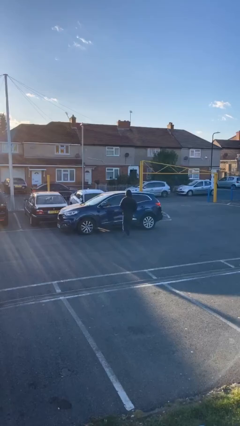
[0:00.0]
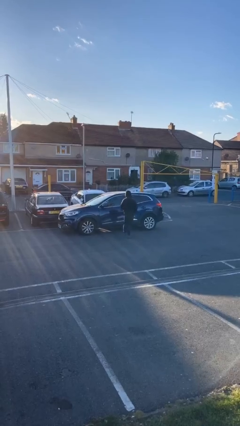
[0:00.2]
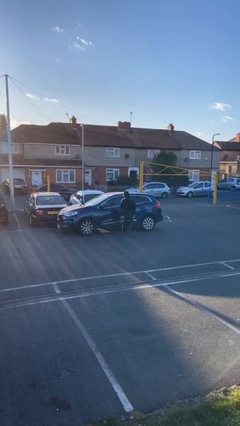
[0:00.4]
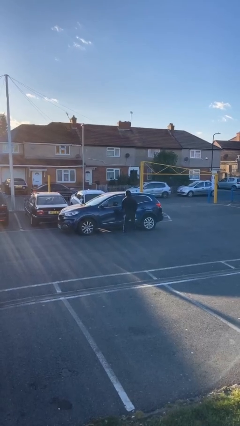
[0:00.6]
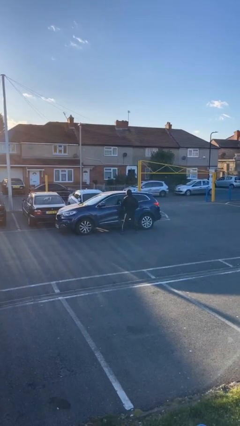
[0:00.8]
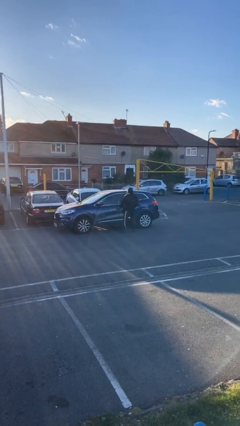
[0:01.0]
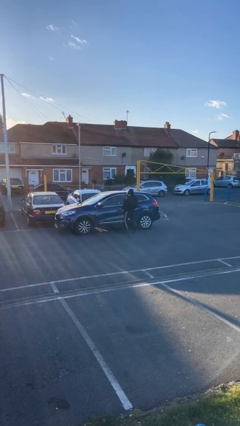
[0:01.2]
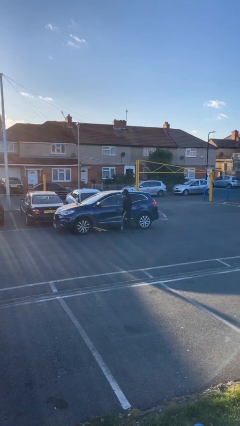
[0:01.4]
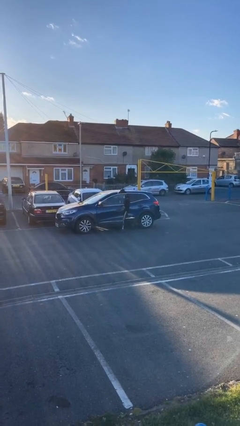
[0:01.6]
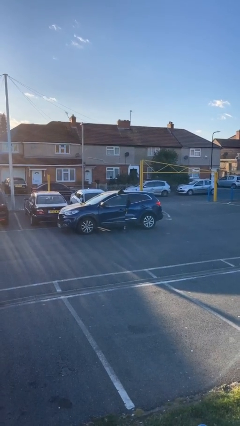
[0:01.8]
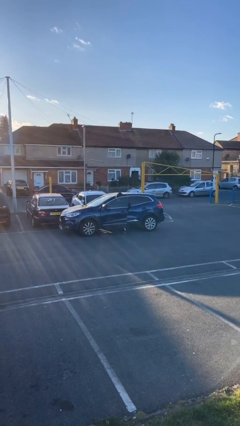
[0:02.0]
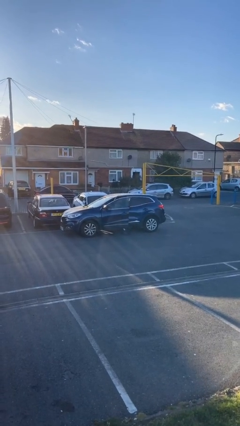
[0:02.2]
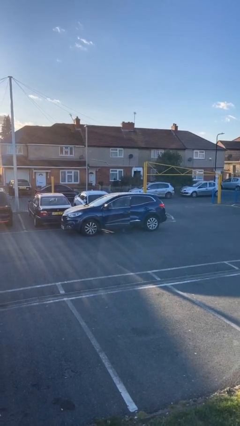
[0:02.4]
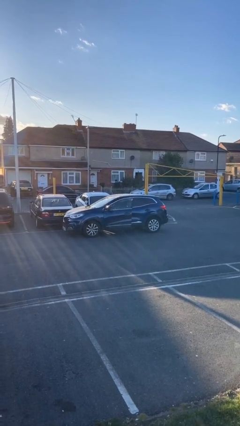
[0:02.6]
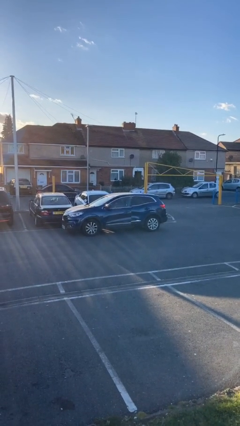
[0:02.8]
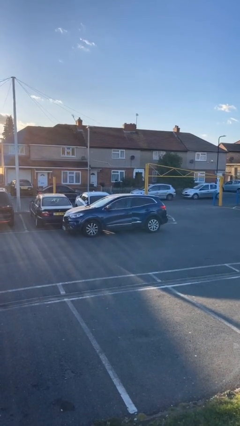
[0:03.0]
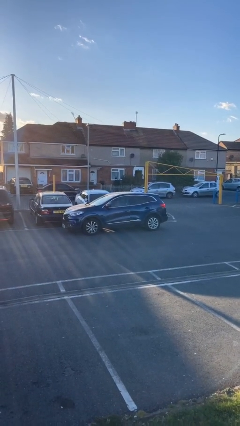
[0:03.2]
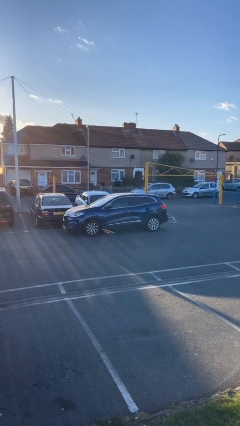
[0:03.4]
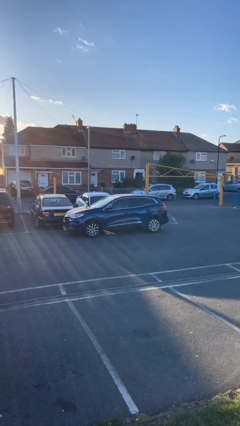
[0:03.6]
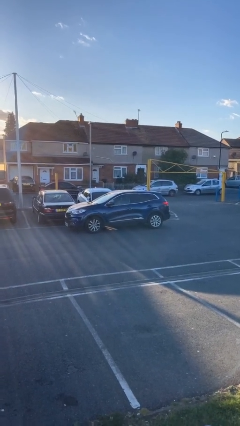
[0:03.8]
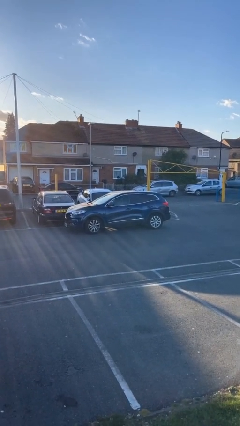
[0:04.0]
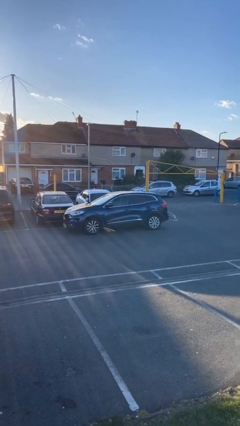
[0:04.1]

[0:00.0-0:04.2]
car picks up person

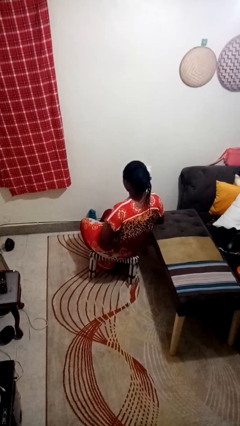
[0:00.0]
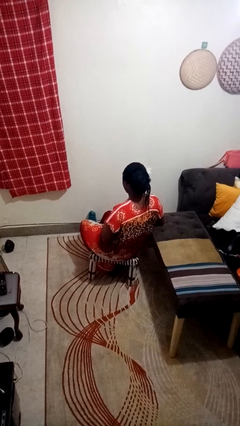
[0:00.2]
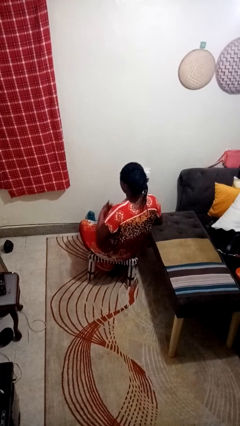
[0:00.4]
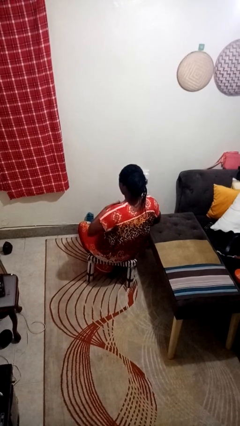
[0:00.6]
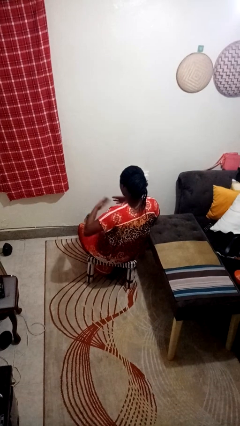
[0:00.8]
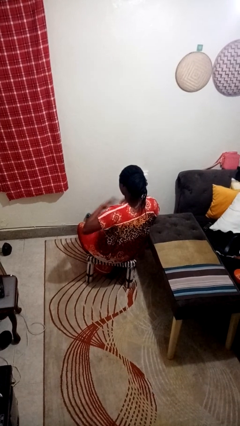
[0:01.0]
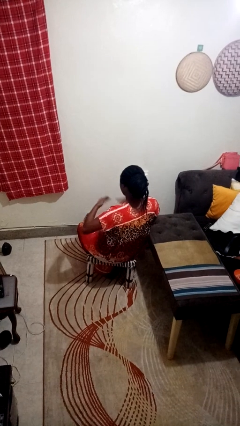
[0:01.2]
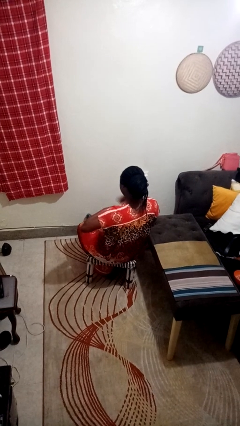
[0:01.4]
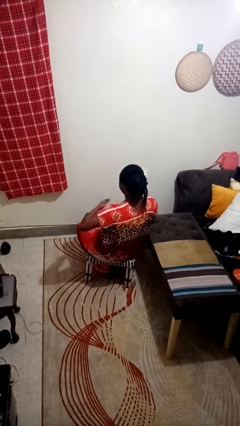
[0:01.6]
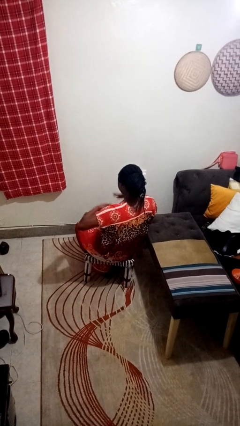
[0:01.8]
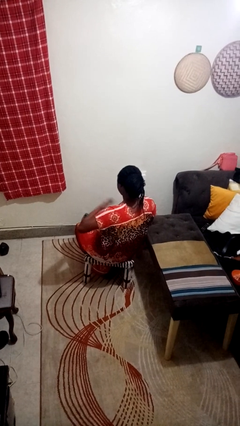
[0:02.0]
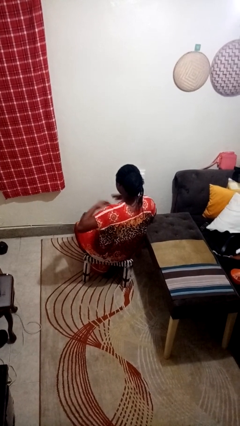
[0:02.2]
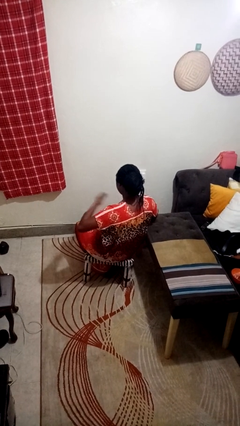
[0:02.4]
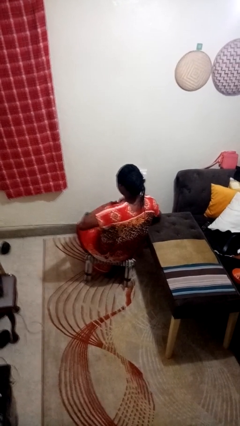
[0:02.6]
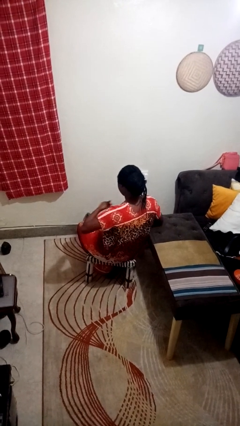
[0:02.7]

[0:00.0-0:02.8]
person drums on chest

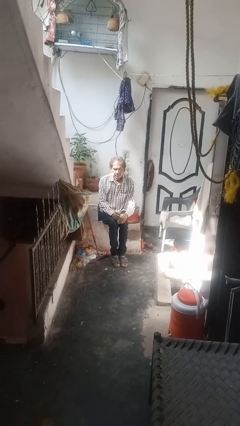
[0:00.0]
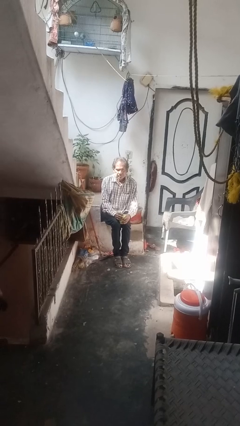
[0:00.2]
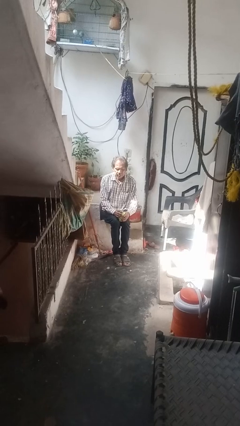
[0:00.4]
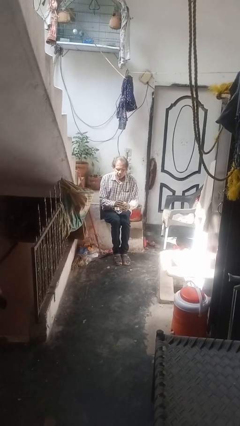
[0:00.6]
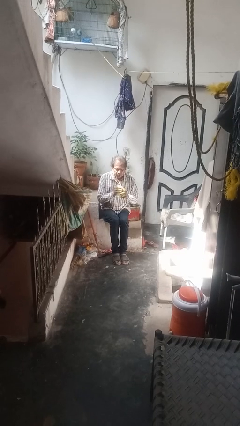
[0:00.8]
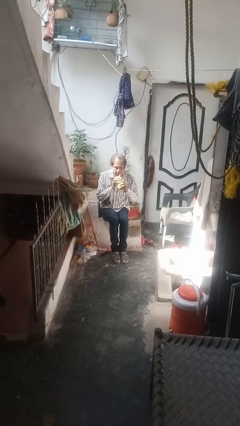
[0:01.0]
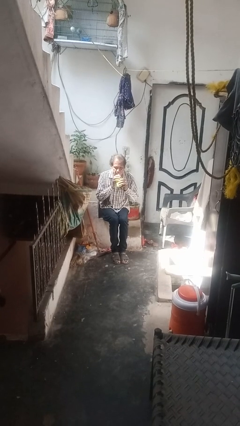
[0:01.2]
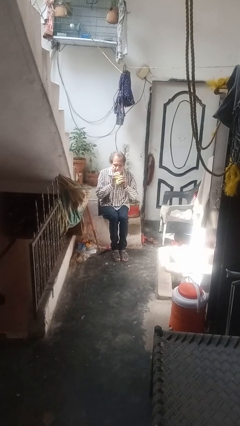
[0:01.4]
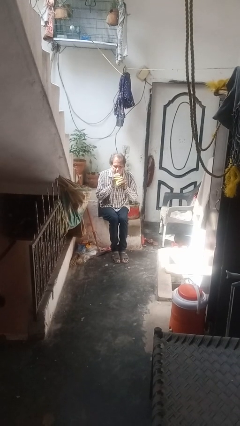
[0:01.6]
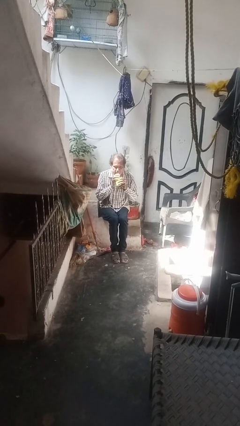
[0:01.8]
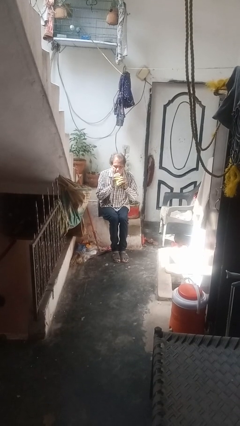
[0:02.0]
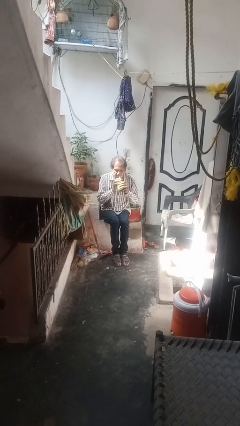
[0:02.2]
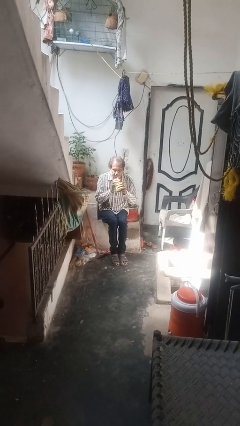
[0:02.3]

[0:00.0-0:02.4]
person drinks from straw

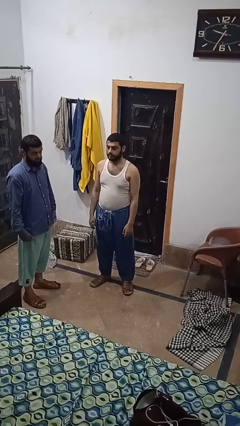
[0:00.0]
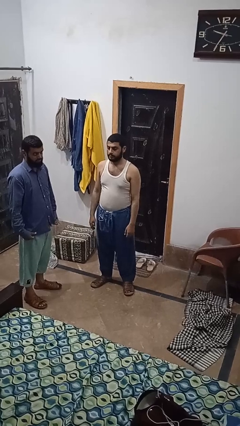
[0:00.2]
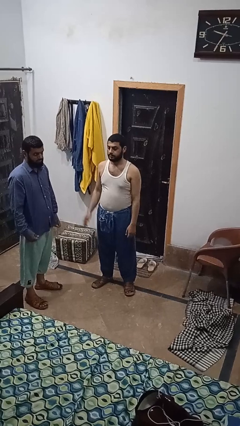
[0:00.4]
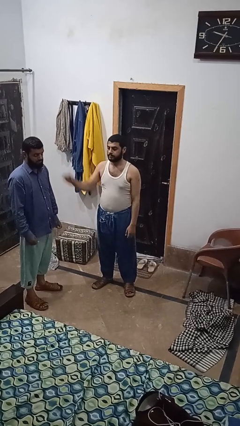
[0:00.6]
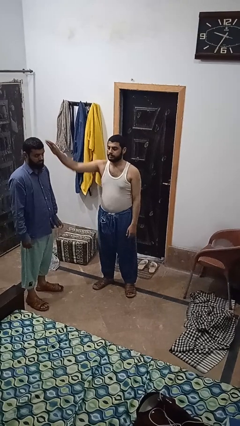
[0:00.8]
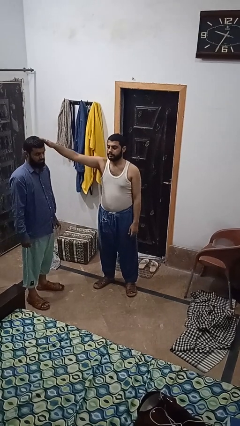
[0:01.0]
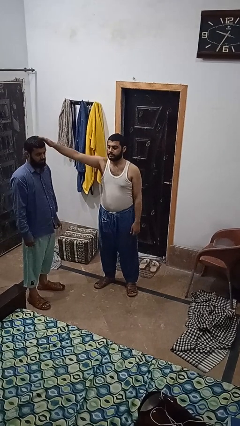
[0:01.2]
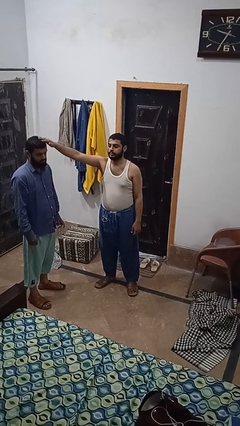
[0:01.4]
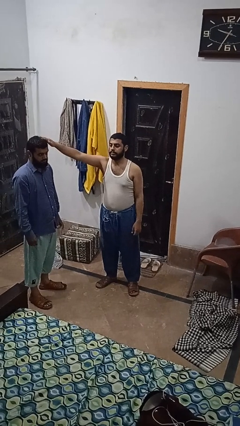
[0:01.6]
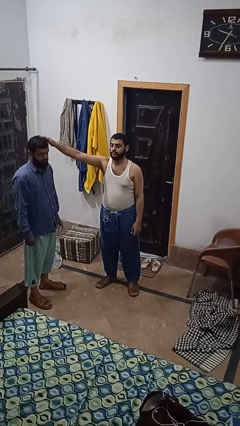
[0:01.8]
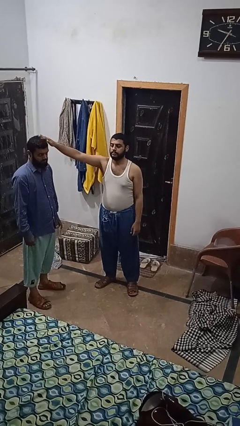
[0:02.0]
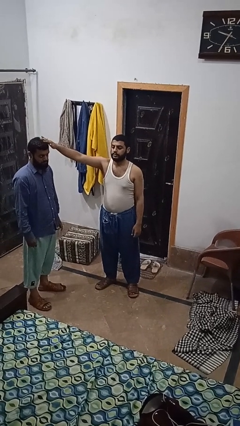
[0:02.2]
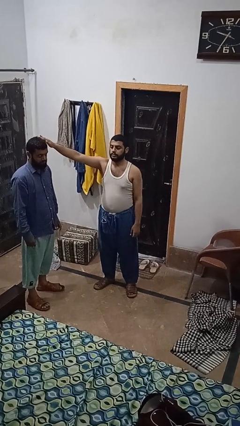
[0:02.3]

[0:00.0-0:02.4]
person grabs person by hair

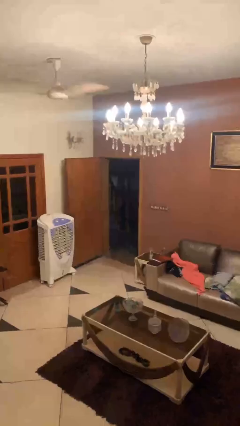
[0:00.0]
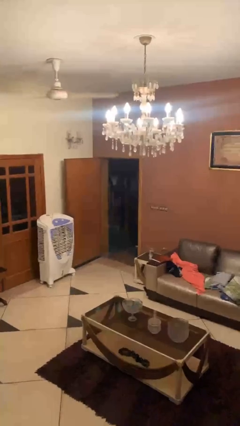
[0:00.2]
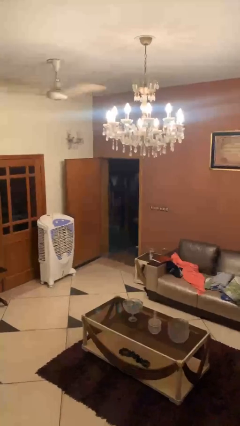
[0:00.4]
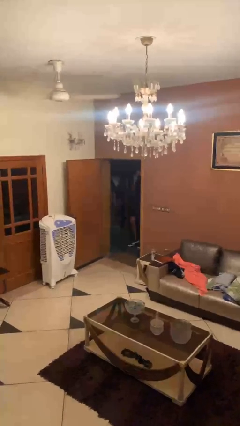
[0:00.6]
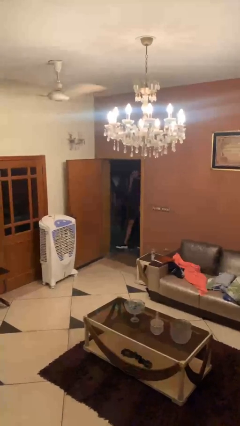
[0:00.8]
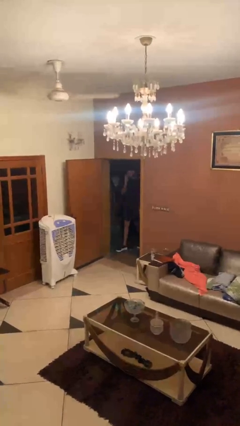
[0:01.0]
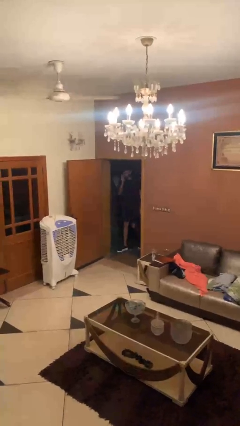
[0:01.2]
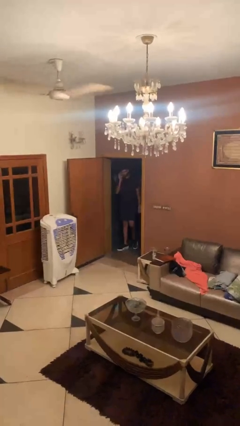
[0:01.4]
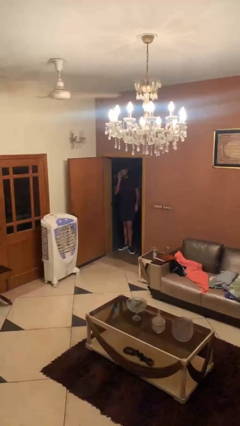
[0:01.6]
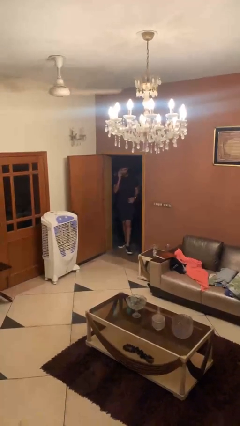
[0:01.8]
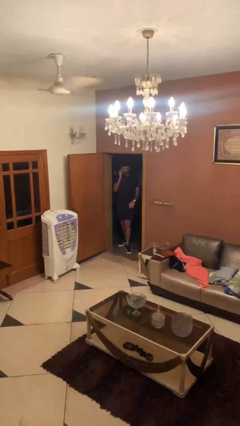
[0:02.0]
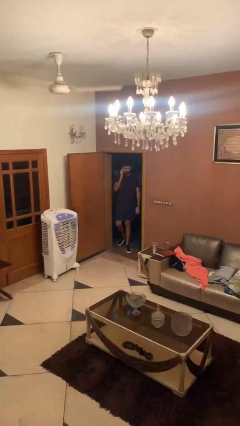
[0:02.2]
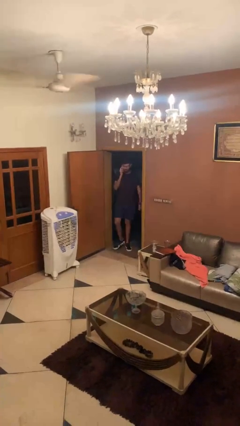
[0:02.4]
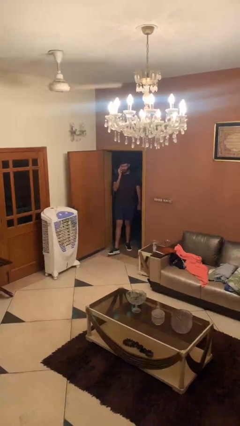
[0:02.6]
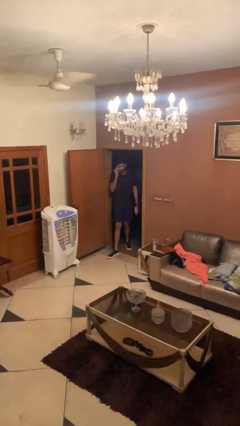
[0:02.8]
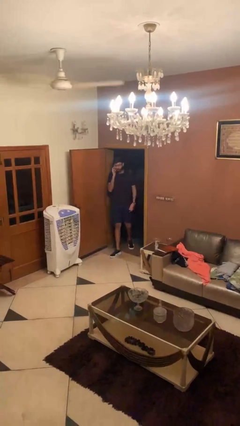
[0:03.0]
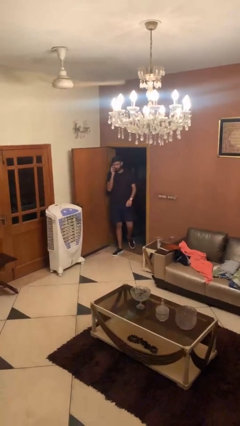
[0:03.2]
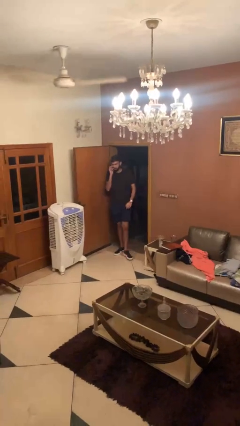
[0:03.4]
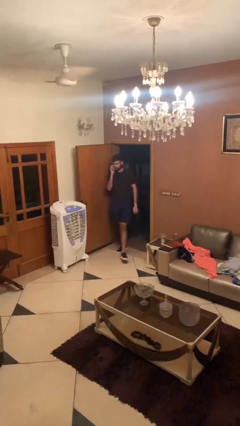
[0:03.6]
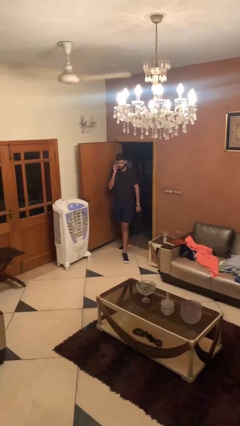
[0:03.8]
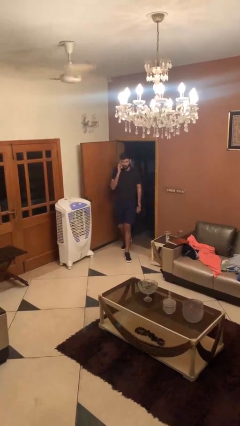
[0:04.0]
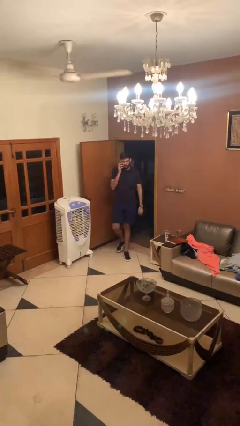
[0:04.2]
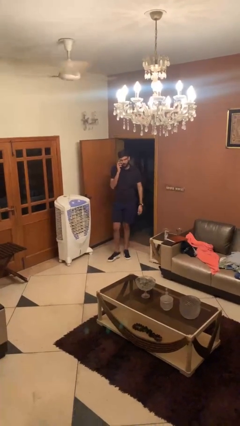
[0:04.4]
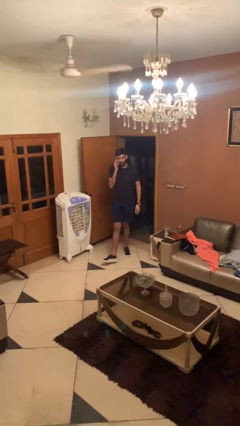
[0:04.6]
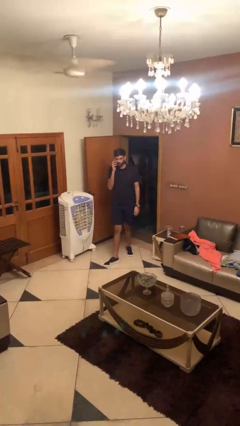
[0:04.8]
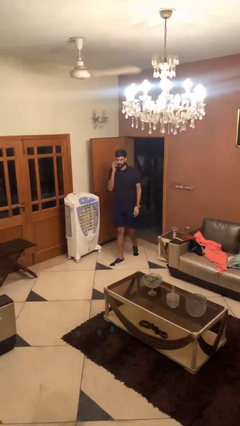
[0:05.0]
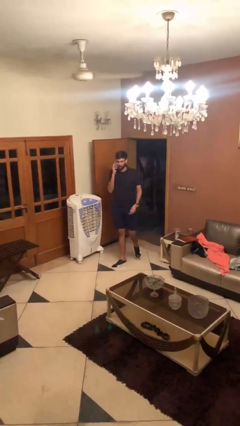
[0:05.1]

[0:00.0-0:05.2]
person enters scene through structure

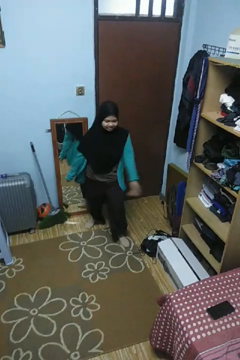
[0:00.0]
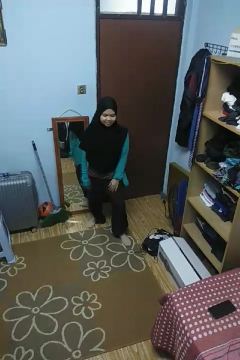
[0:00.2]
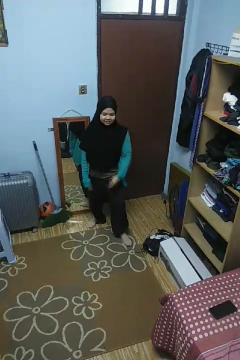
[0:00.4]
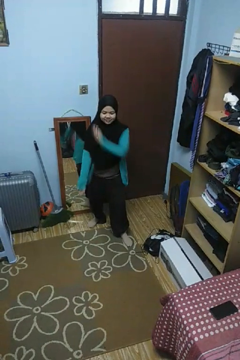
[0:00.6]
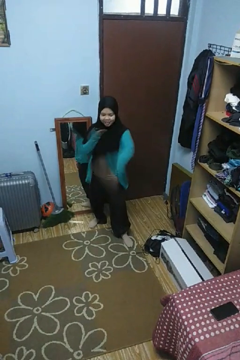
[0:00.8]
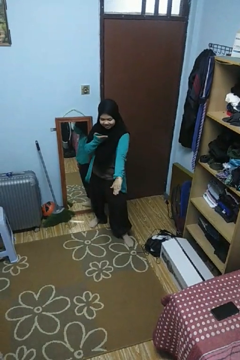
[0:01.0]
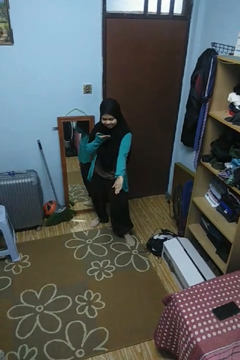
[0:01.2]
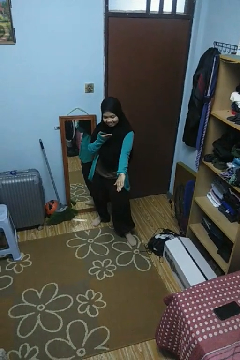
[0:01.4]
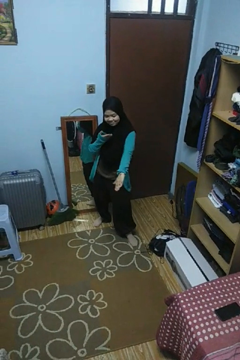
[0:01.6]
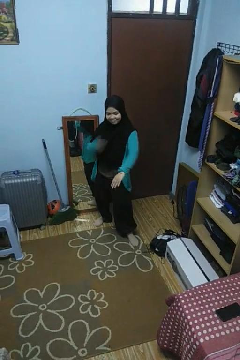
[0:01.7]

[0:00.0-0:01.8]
person karate chop